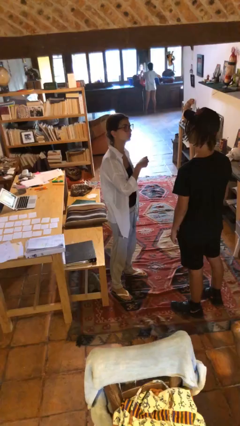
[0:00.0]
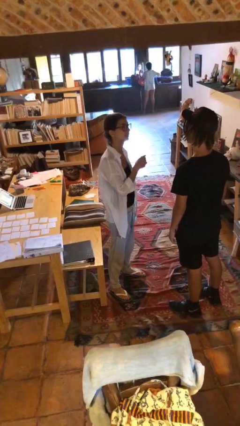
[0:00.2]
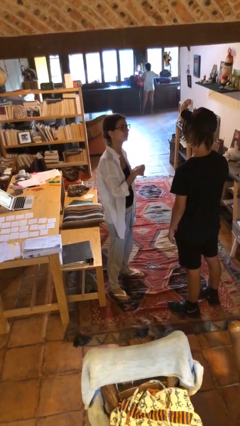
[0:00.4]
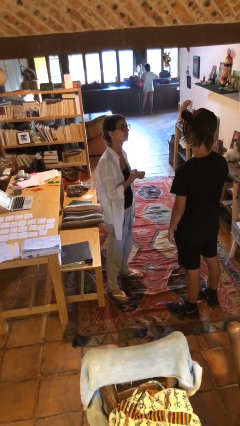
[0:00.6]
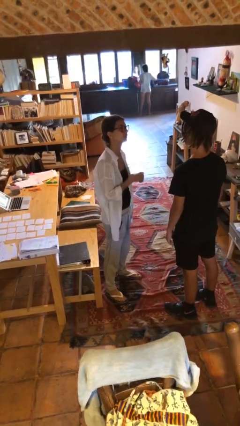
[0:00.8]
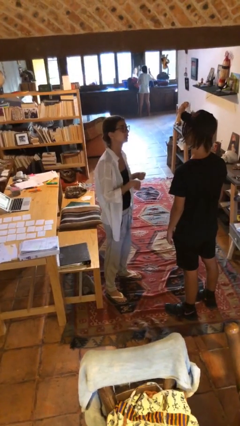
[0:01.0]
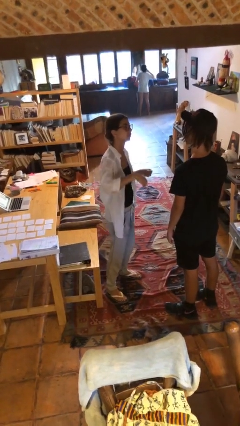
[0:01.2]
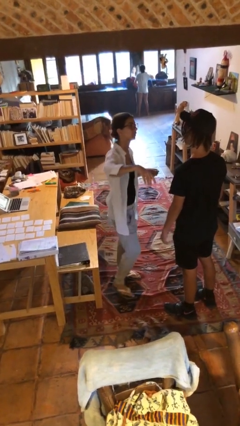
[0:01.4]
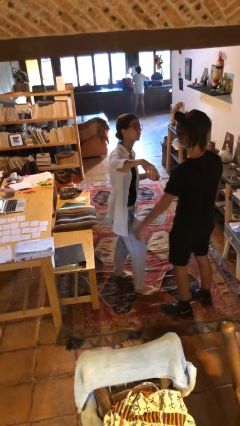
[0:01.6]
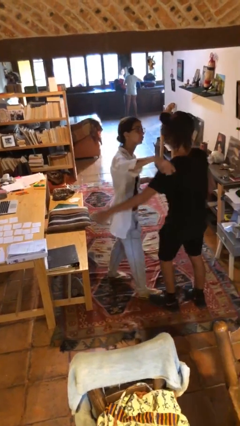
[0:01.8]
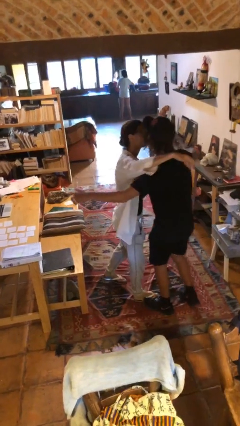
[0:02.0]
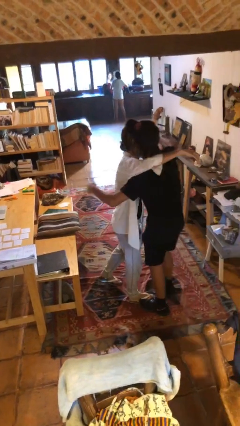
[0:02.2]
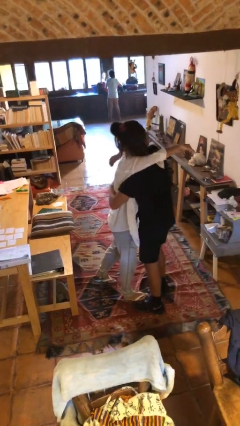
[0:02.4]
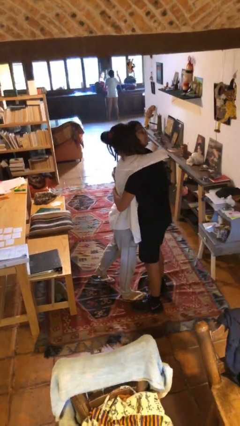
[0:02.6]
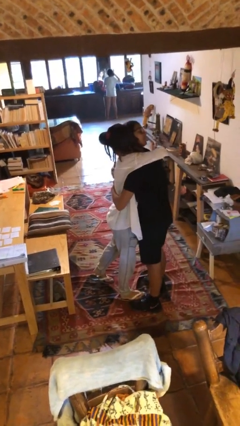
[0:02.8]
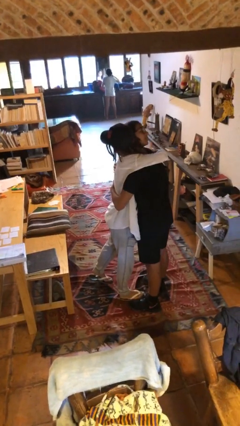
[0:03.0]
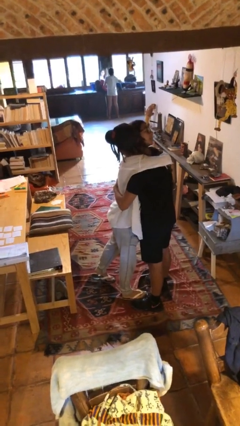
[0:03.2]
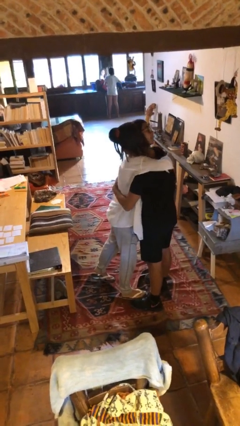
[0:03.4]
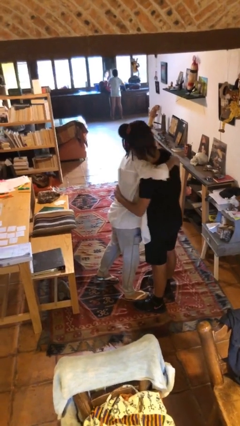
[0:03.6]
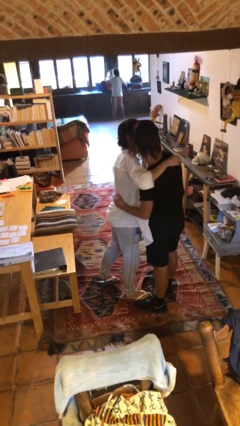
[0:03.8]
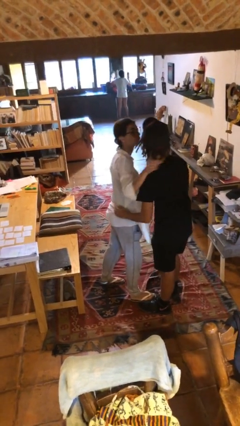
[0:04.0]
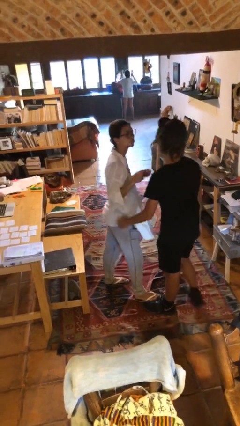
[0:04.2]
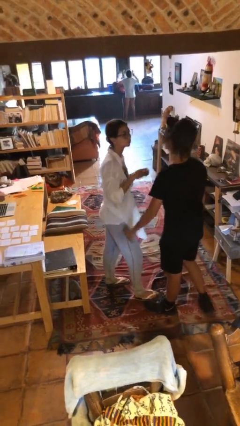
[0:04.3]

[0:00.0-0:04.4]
person embraces person

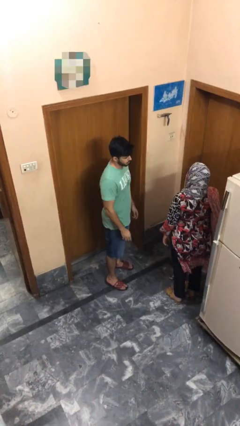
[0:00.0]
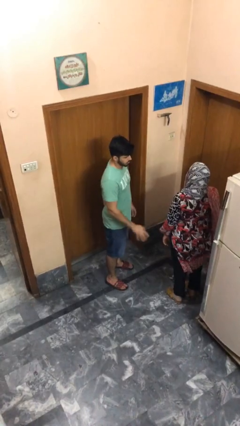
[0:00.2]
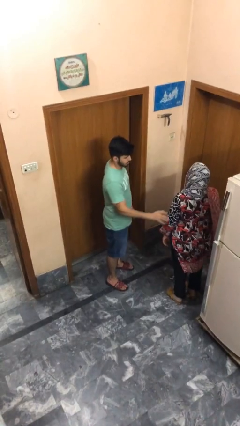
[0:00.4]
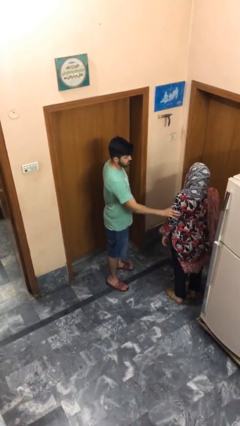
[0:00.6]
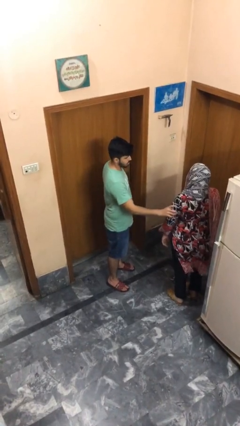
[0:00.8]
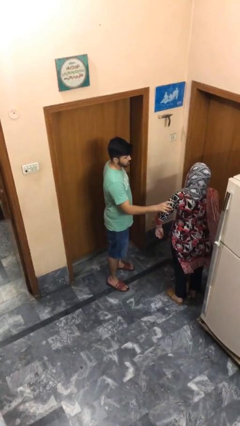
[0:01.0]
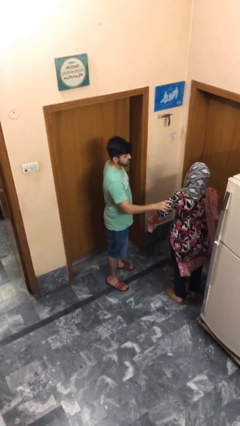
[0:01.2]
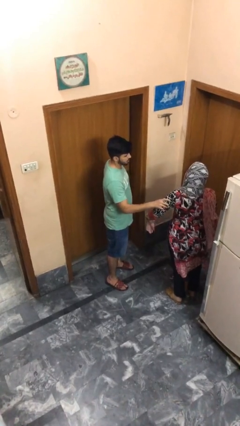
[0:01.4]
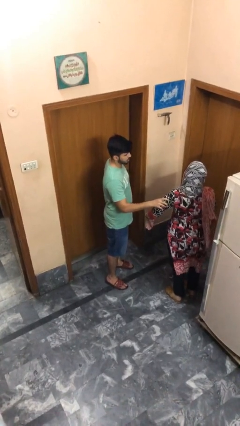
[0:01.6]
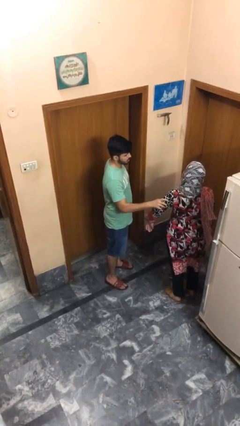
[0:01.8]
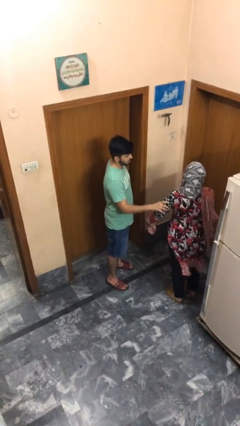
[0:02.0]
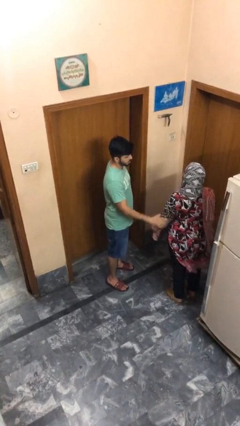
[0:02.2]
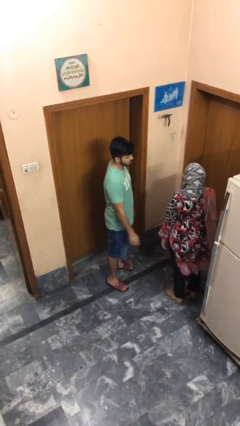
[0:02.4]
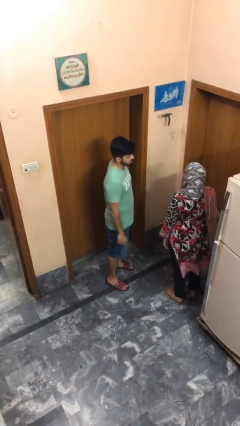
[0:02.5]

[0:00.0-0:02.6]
person grabs person by bicep

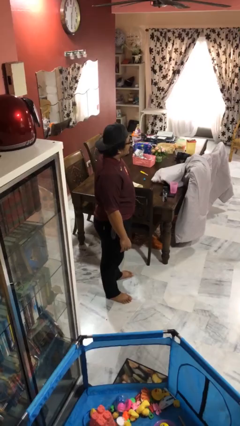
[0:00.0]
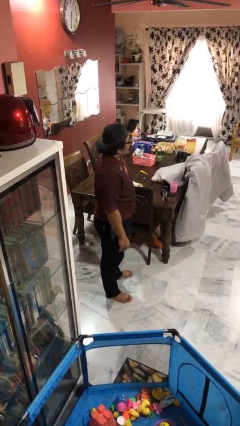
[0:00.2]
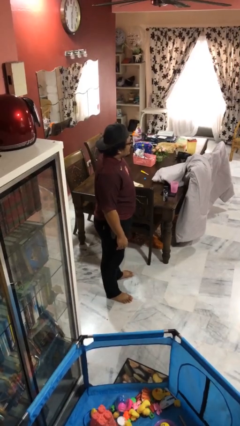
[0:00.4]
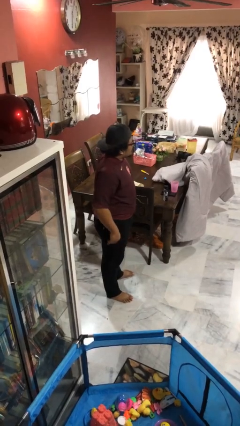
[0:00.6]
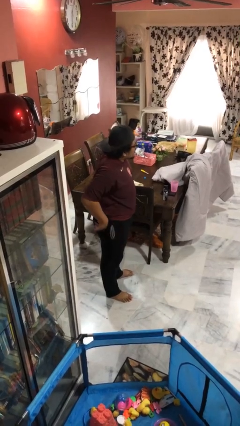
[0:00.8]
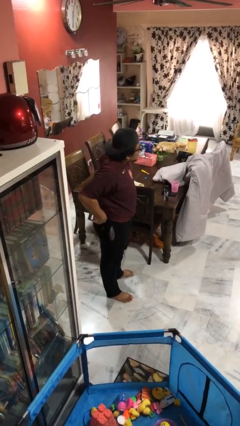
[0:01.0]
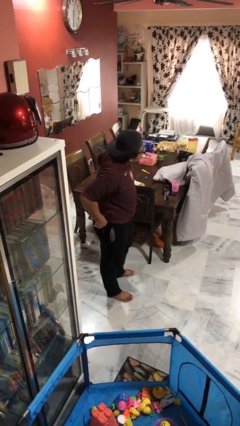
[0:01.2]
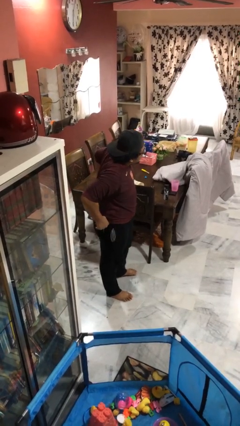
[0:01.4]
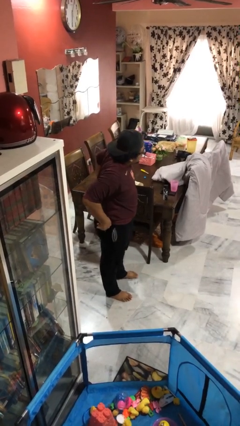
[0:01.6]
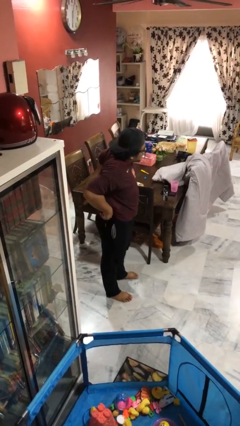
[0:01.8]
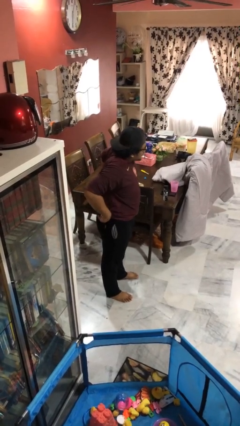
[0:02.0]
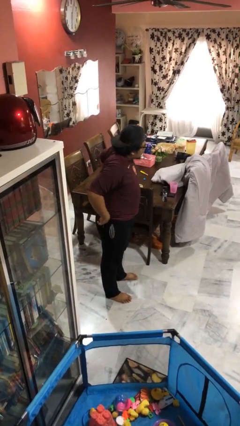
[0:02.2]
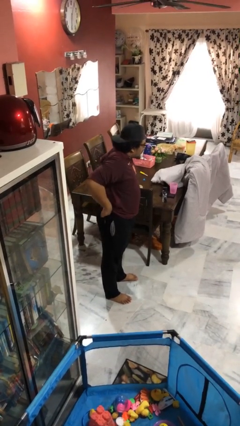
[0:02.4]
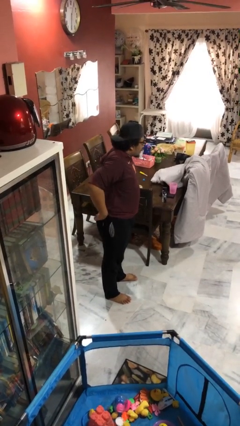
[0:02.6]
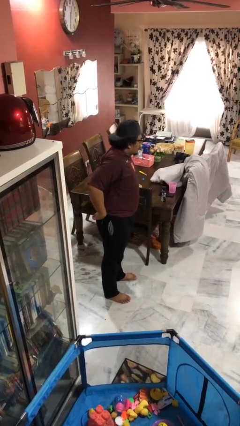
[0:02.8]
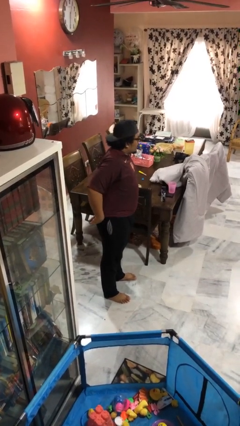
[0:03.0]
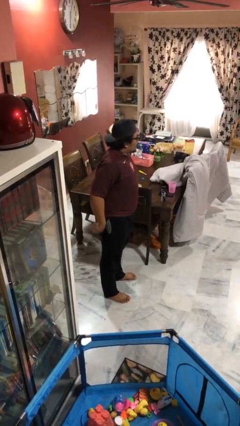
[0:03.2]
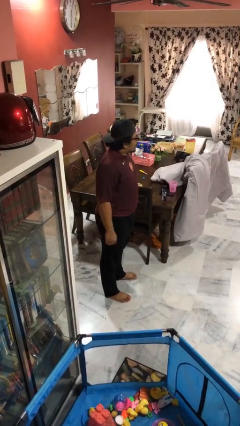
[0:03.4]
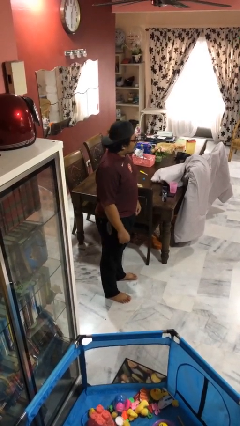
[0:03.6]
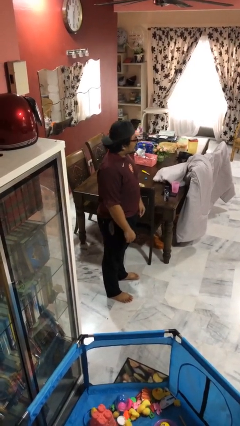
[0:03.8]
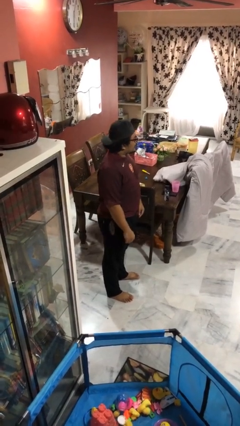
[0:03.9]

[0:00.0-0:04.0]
person hikes up pants

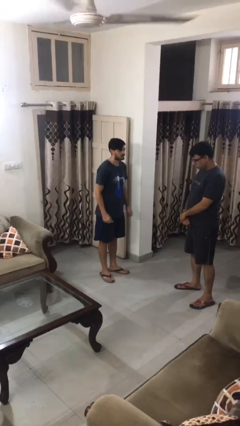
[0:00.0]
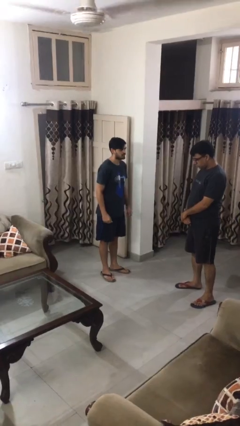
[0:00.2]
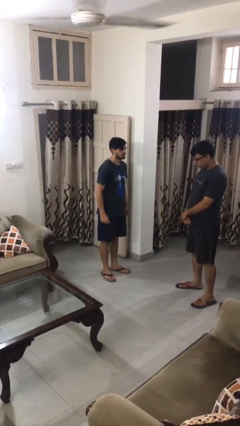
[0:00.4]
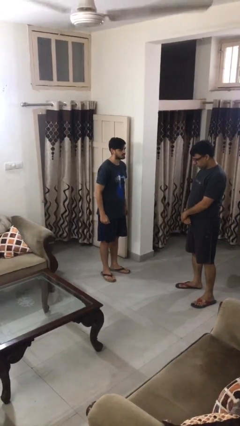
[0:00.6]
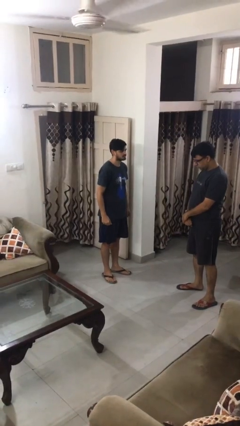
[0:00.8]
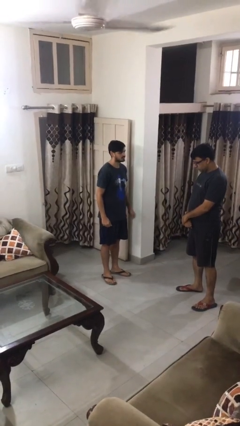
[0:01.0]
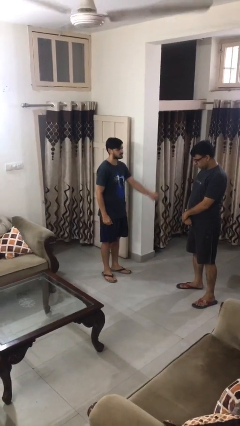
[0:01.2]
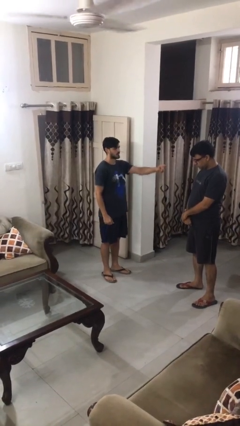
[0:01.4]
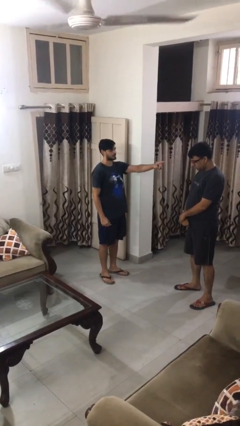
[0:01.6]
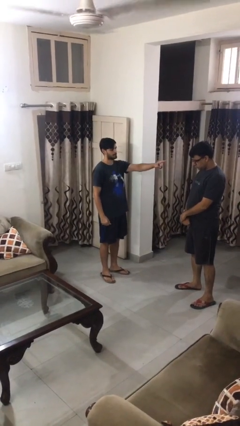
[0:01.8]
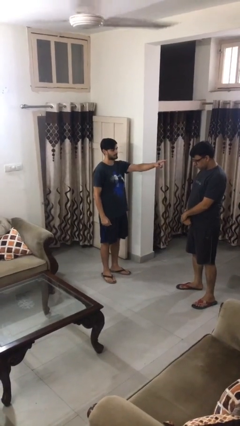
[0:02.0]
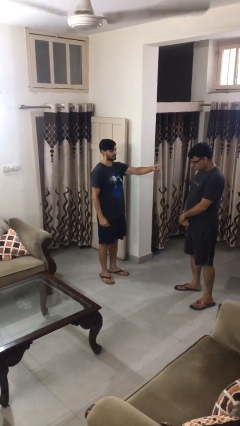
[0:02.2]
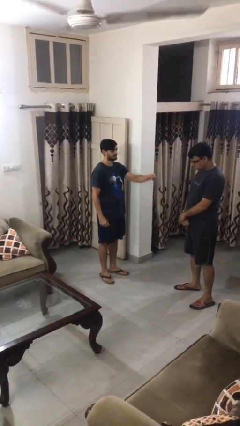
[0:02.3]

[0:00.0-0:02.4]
person points at person

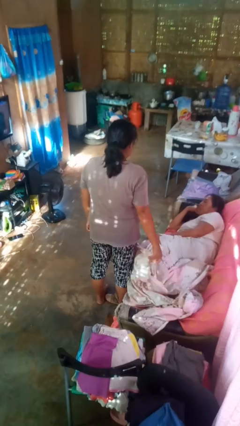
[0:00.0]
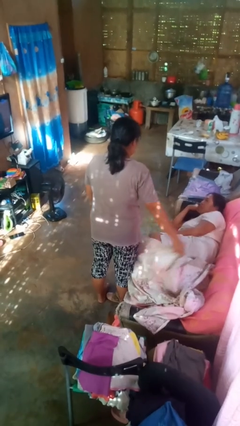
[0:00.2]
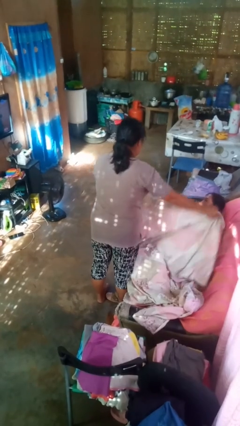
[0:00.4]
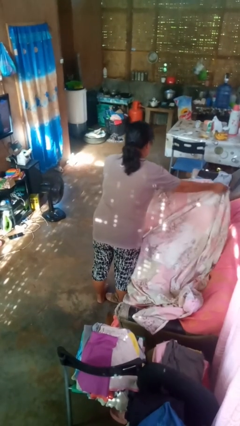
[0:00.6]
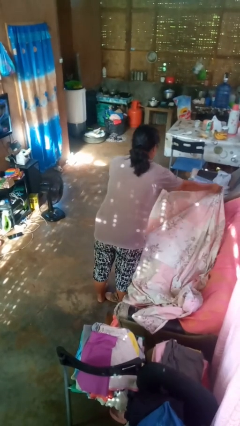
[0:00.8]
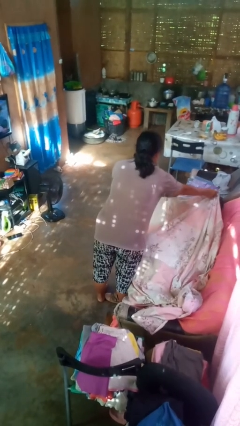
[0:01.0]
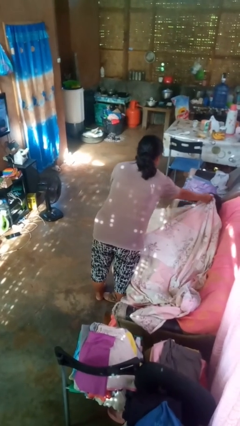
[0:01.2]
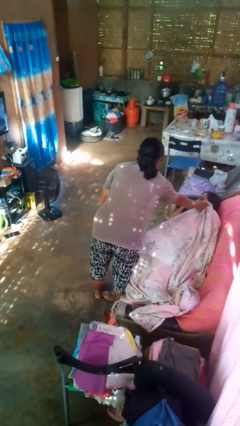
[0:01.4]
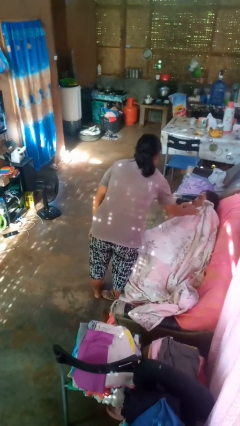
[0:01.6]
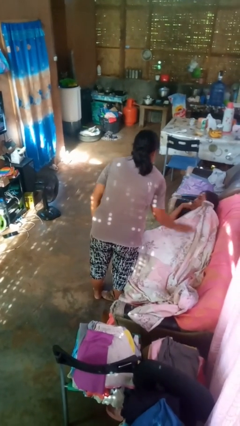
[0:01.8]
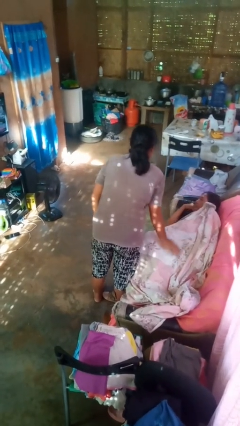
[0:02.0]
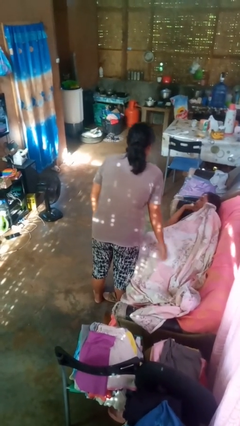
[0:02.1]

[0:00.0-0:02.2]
person covers friend with blanket

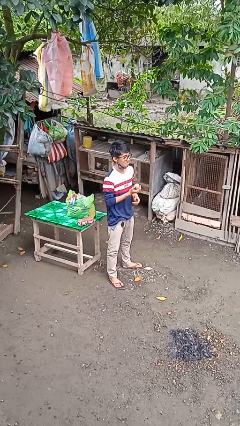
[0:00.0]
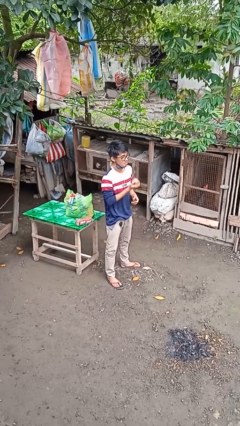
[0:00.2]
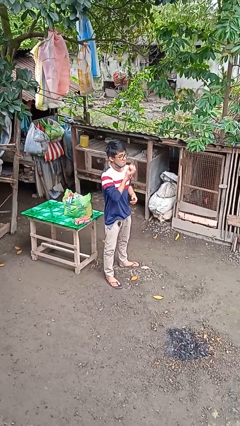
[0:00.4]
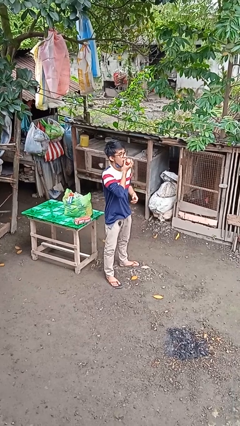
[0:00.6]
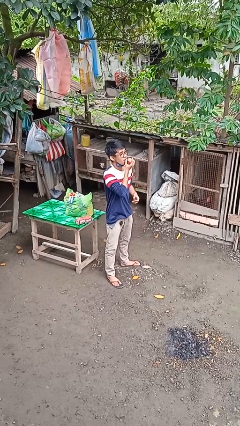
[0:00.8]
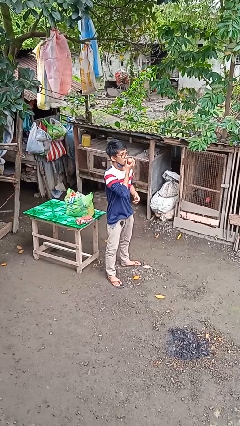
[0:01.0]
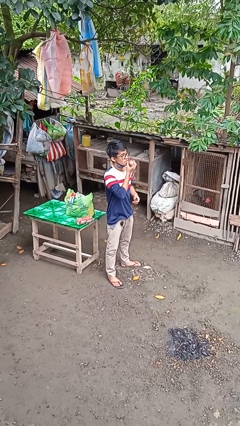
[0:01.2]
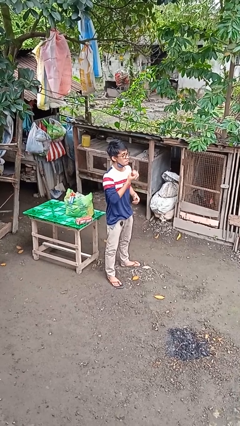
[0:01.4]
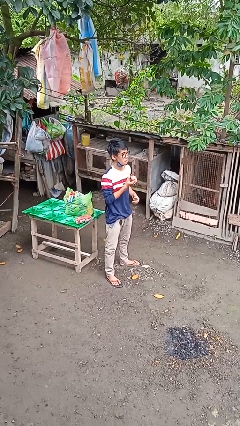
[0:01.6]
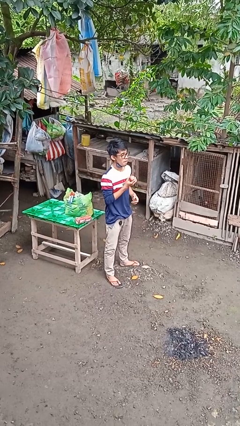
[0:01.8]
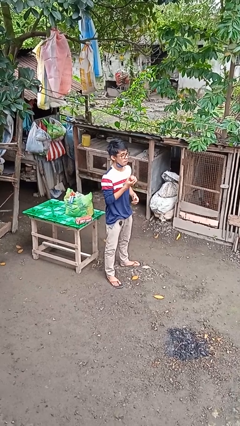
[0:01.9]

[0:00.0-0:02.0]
person eats apple
